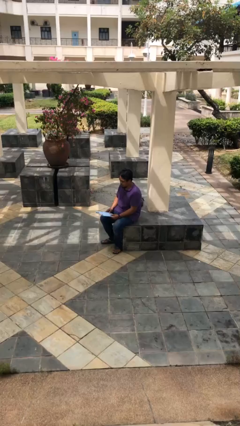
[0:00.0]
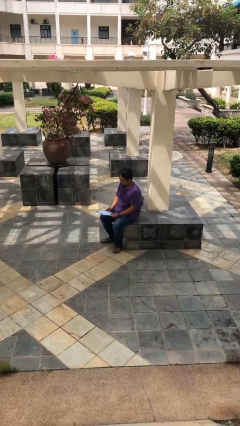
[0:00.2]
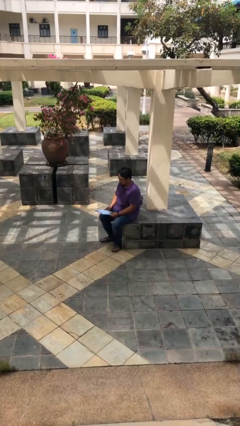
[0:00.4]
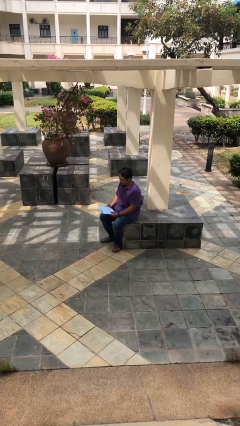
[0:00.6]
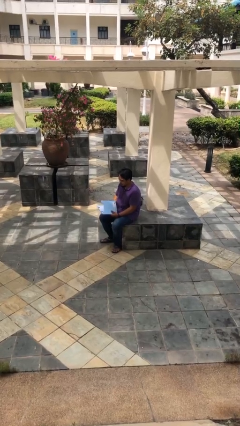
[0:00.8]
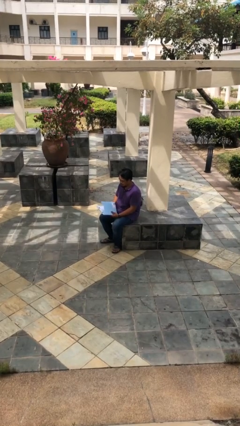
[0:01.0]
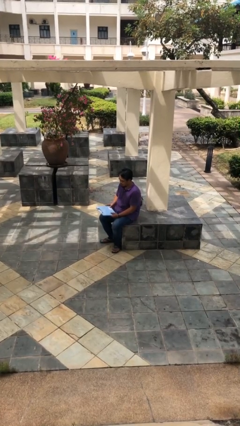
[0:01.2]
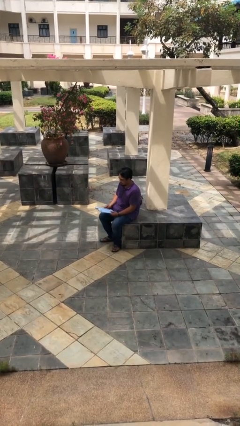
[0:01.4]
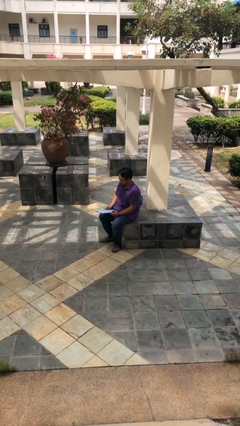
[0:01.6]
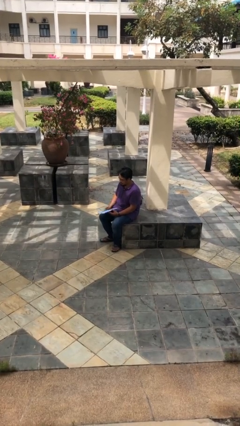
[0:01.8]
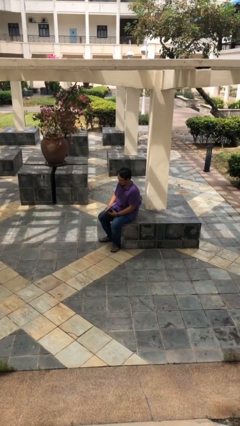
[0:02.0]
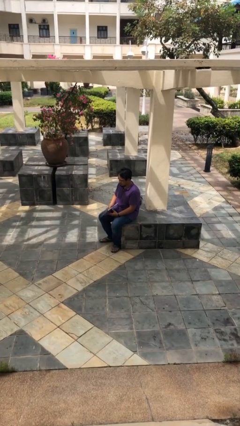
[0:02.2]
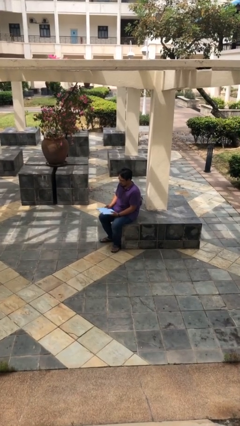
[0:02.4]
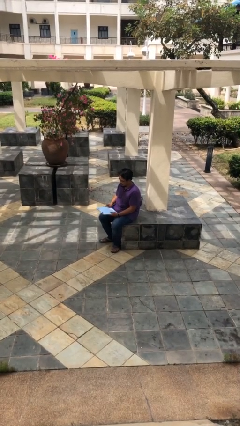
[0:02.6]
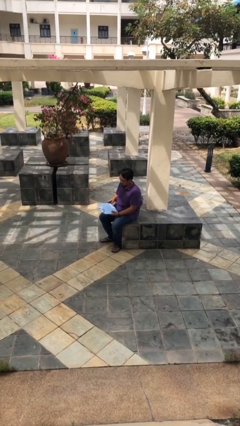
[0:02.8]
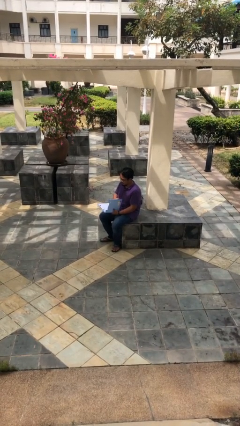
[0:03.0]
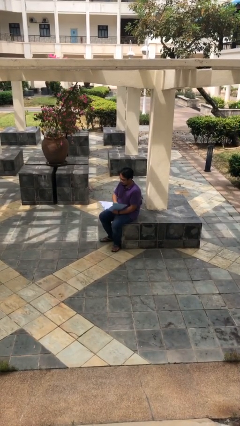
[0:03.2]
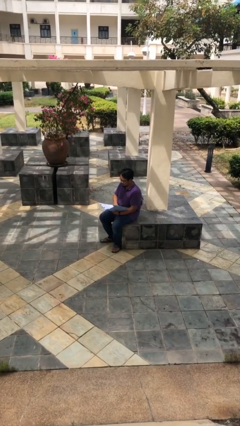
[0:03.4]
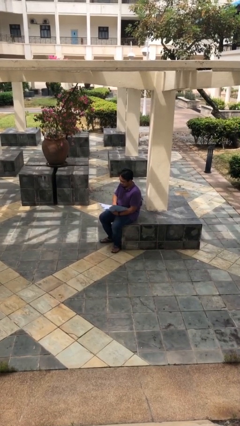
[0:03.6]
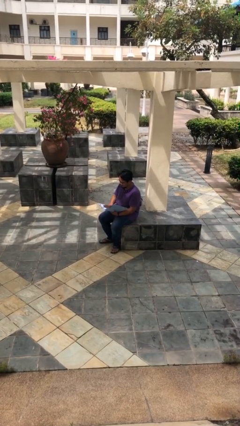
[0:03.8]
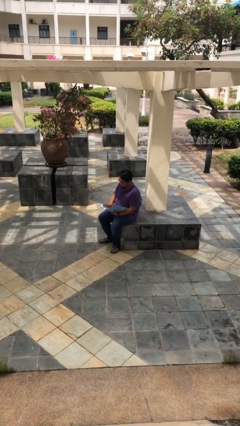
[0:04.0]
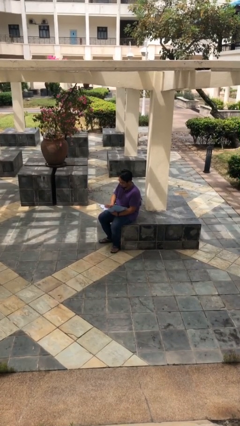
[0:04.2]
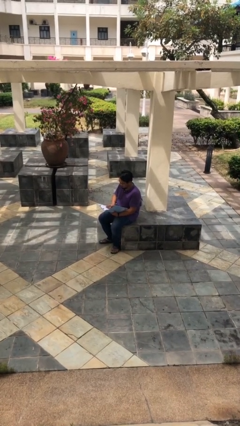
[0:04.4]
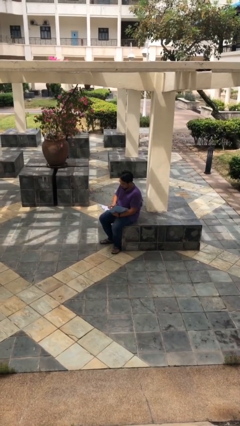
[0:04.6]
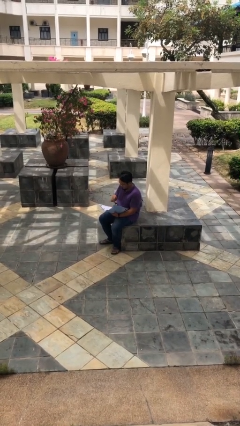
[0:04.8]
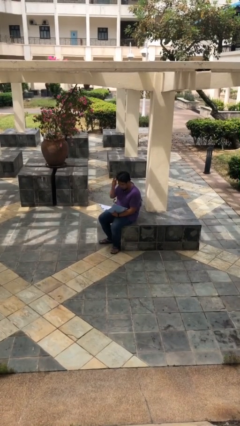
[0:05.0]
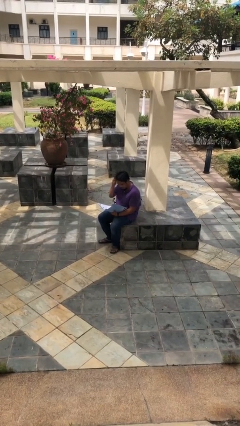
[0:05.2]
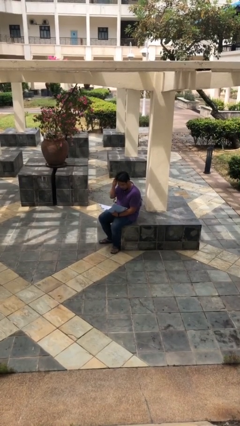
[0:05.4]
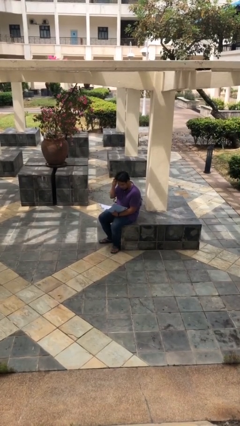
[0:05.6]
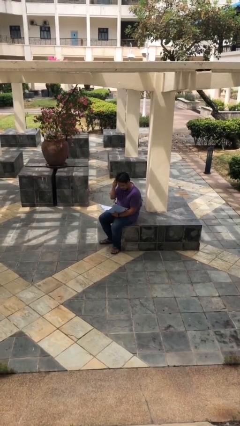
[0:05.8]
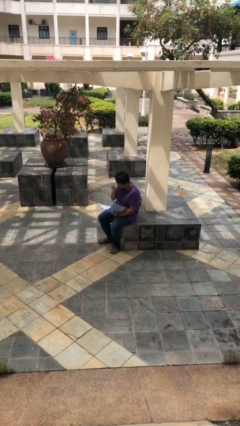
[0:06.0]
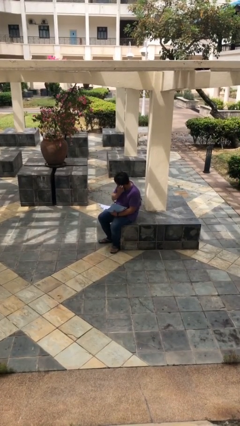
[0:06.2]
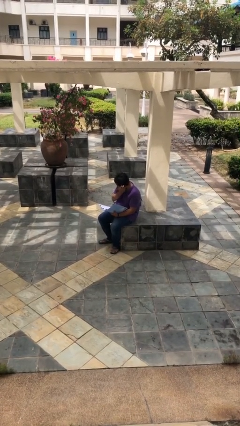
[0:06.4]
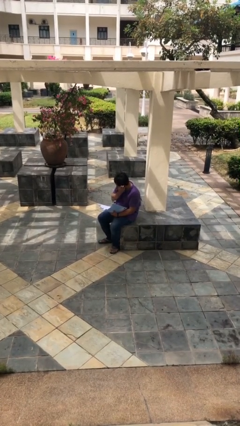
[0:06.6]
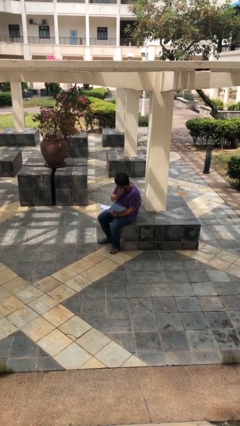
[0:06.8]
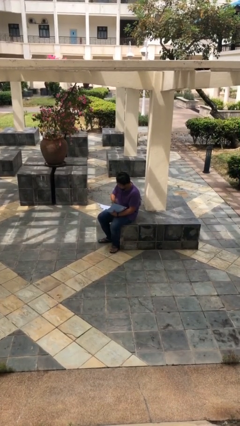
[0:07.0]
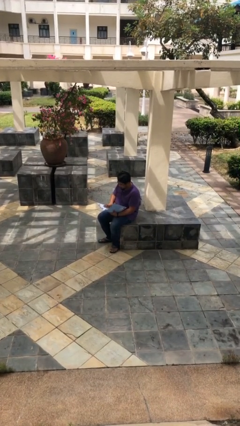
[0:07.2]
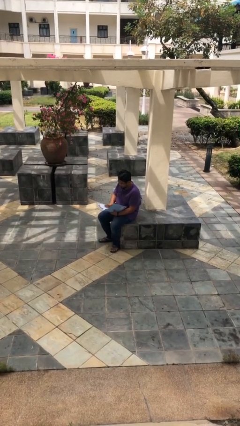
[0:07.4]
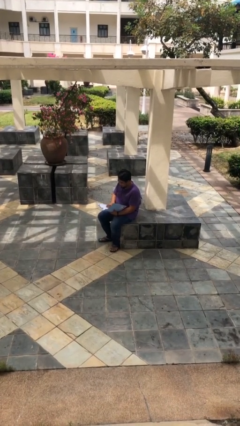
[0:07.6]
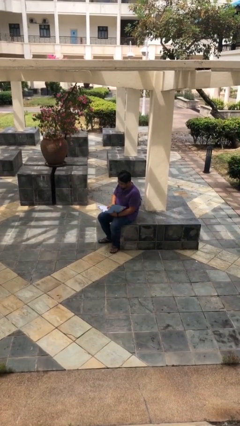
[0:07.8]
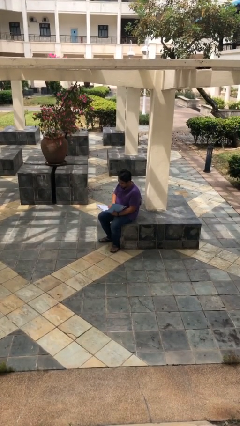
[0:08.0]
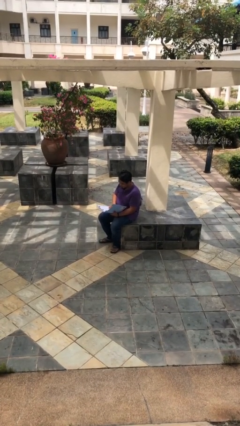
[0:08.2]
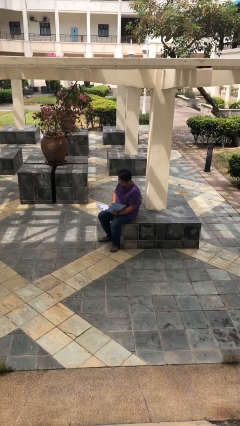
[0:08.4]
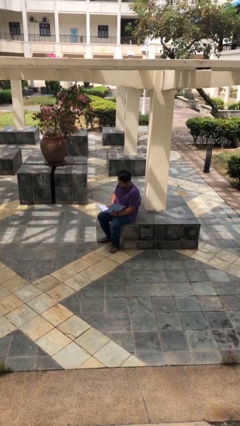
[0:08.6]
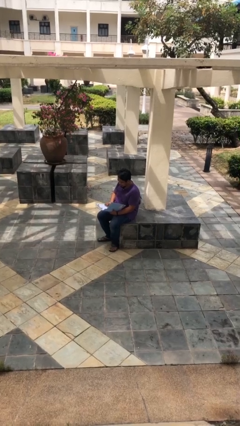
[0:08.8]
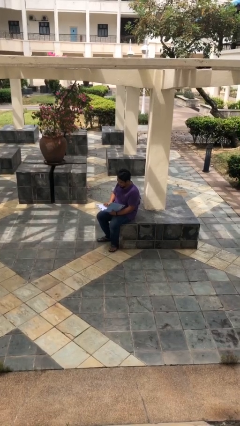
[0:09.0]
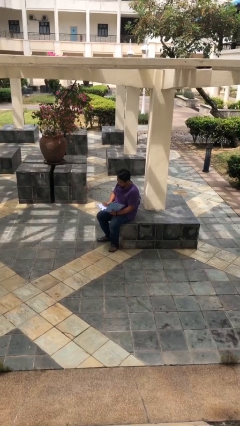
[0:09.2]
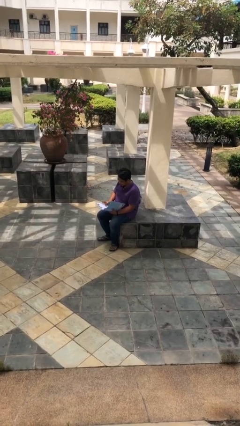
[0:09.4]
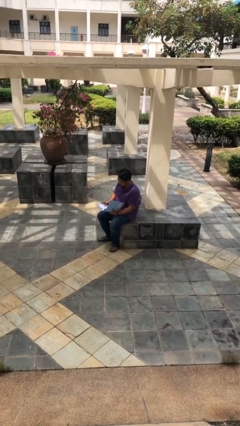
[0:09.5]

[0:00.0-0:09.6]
person reads document

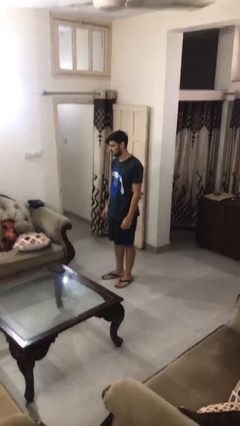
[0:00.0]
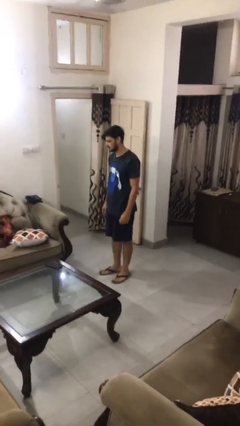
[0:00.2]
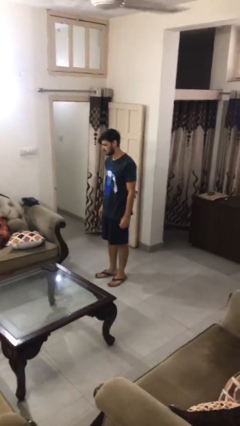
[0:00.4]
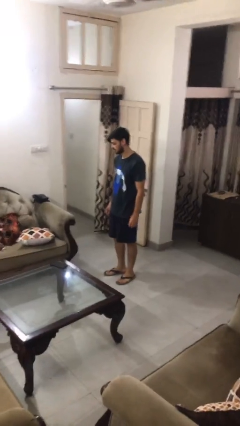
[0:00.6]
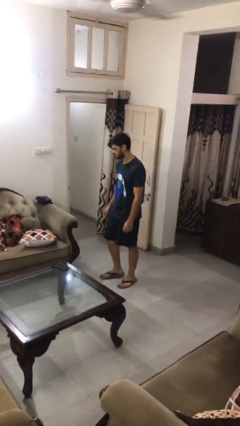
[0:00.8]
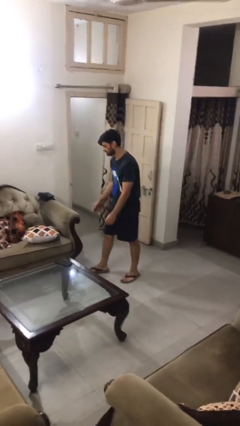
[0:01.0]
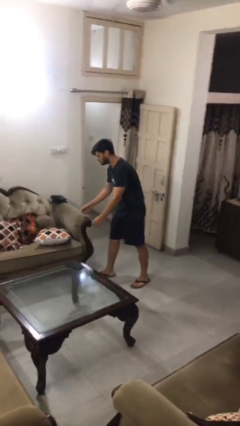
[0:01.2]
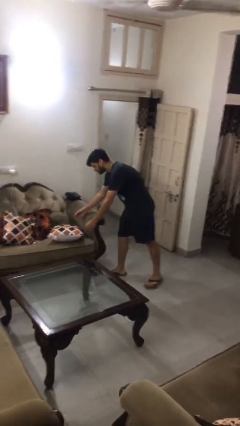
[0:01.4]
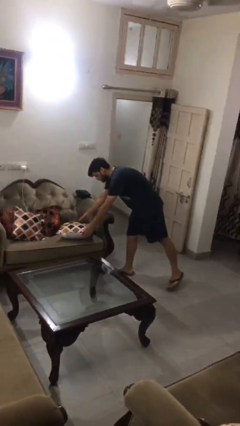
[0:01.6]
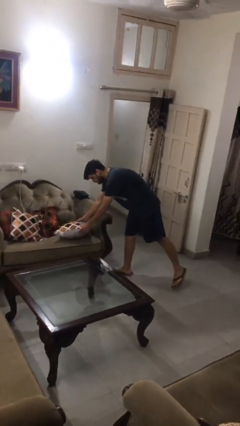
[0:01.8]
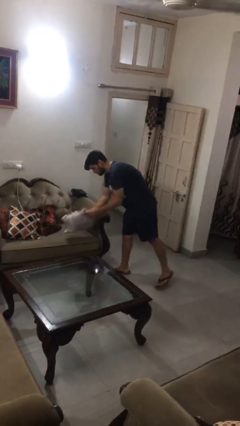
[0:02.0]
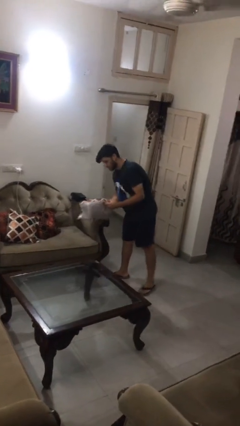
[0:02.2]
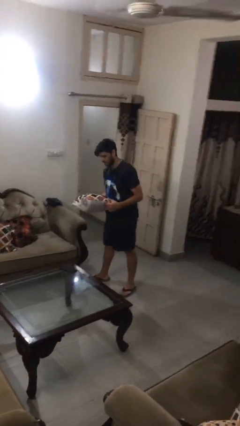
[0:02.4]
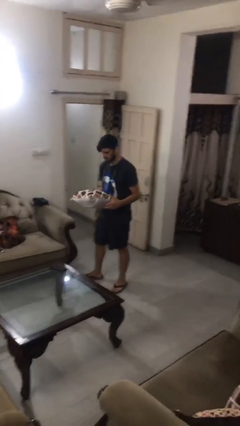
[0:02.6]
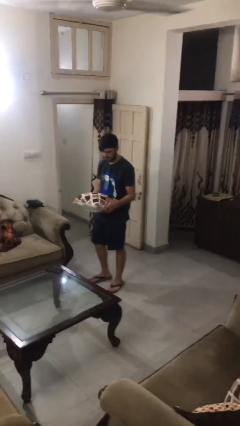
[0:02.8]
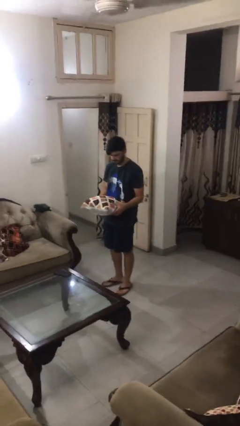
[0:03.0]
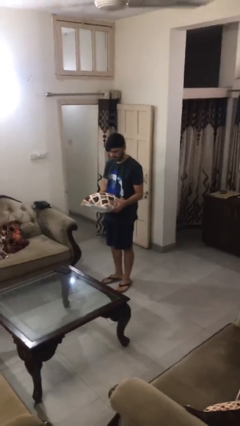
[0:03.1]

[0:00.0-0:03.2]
person picks up object from couch

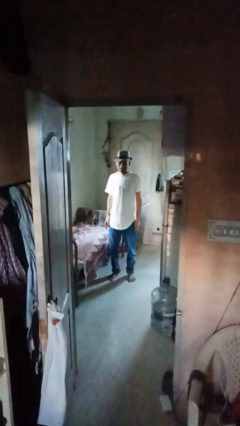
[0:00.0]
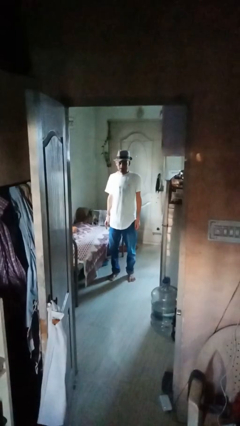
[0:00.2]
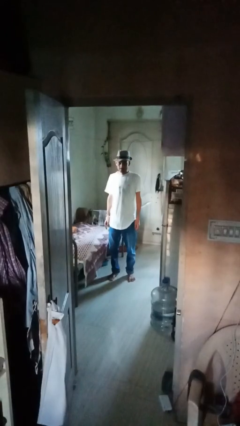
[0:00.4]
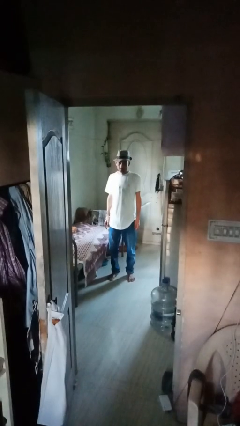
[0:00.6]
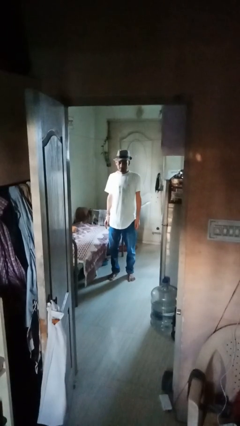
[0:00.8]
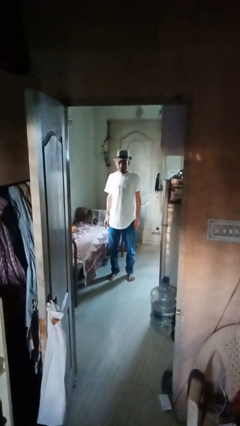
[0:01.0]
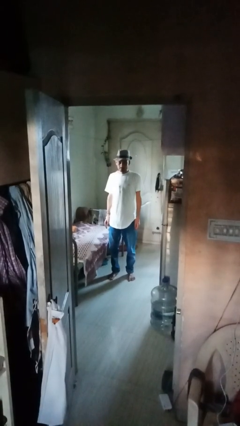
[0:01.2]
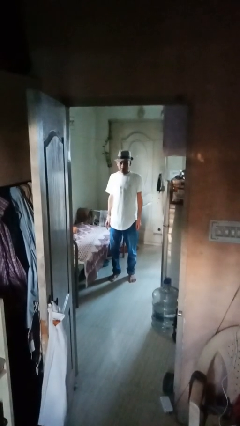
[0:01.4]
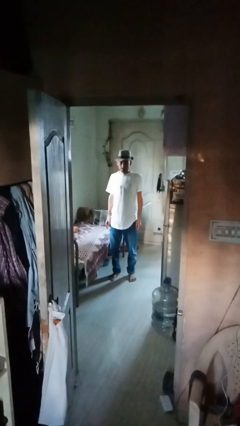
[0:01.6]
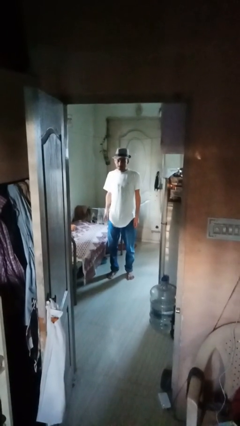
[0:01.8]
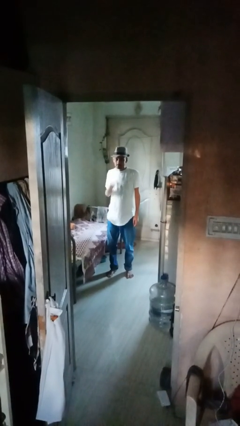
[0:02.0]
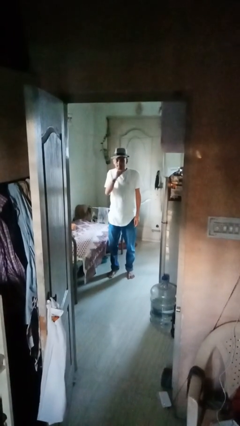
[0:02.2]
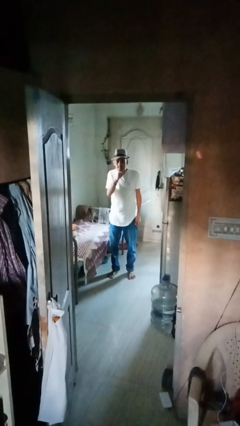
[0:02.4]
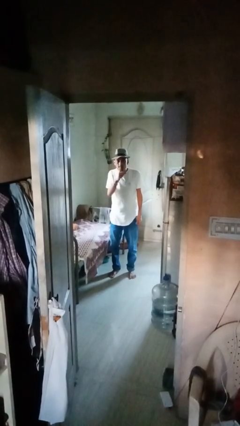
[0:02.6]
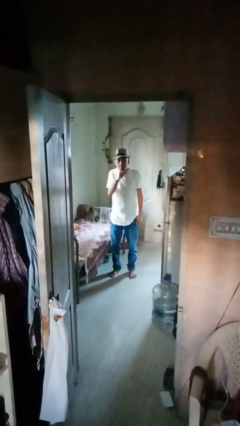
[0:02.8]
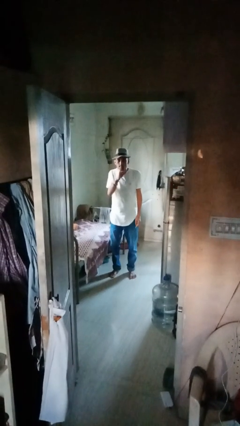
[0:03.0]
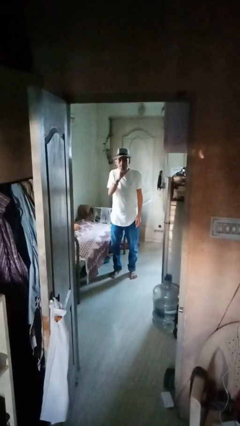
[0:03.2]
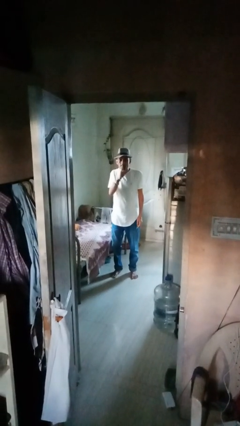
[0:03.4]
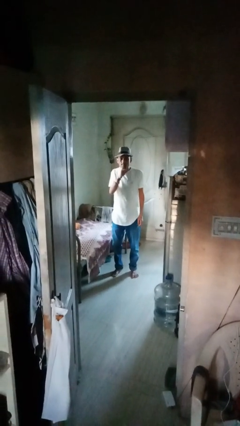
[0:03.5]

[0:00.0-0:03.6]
person gestures be quiet

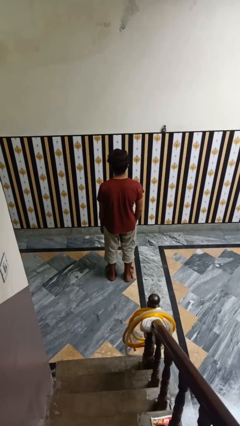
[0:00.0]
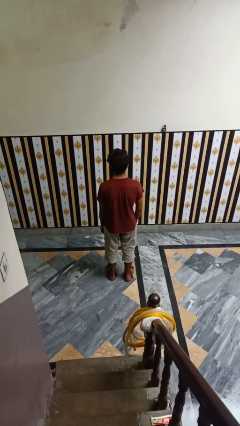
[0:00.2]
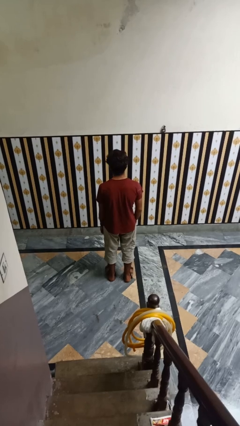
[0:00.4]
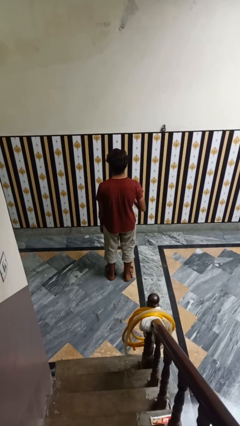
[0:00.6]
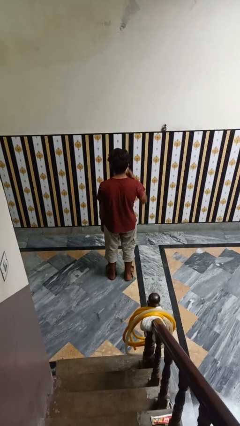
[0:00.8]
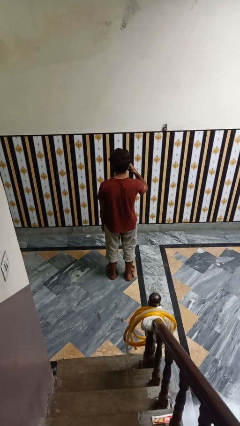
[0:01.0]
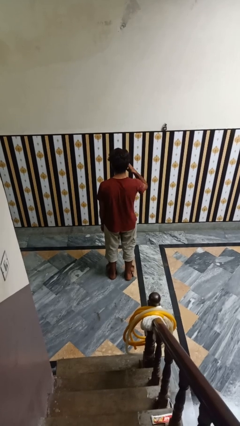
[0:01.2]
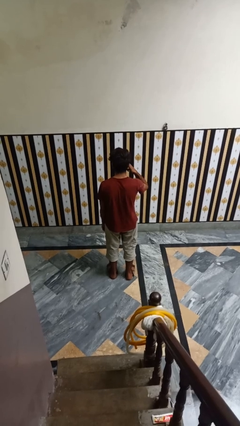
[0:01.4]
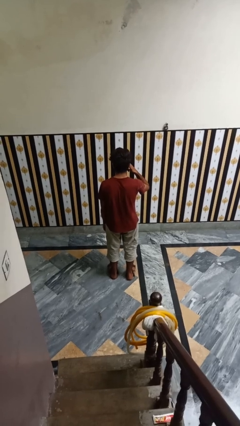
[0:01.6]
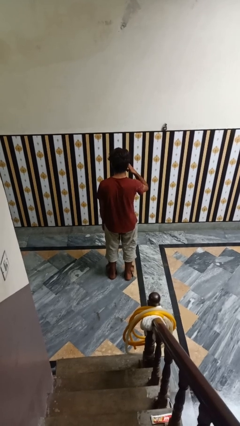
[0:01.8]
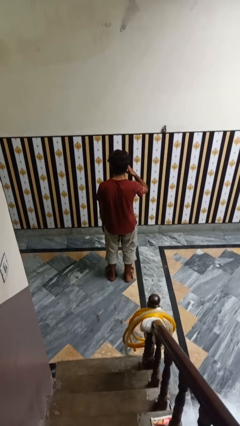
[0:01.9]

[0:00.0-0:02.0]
person gestures call me
